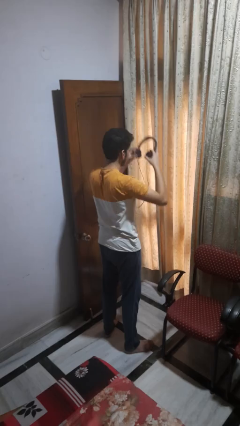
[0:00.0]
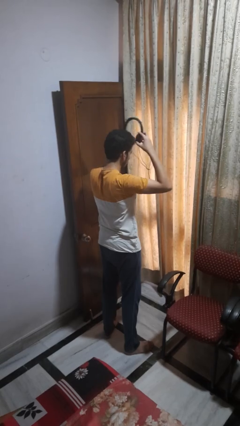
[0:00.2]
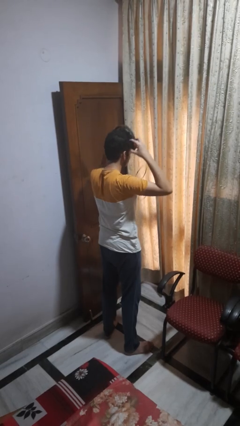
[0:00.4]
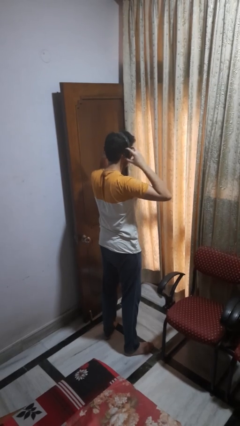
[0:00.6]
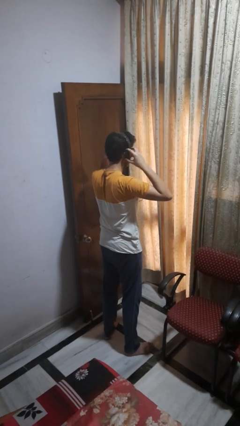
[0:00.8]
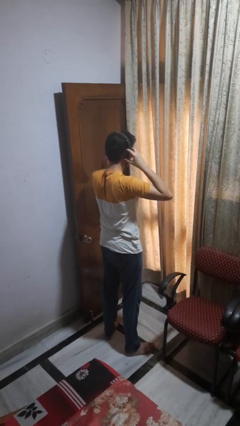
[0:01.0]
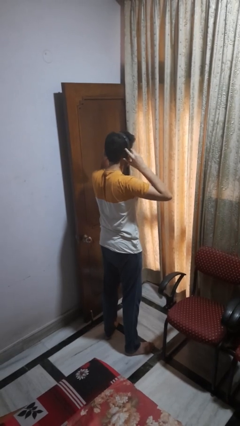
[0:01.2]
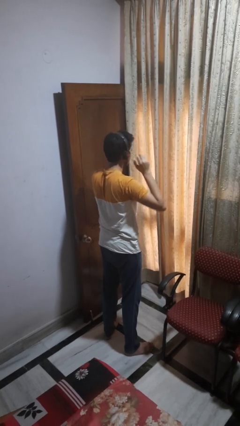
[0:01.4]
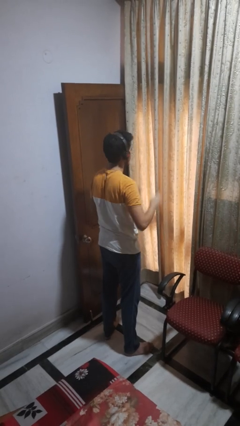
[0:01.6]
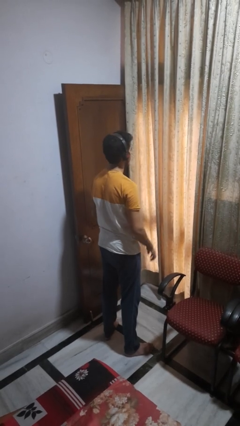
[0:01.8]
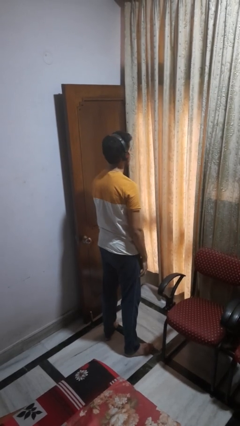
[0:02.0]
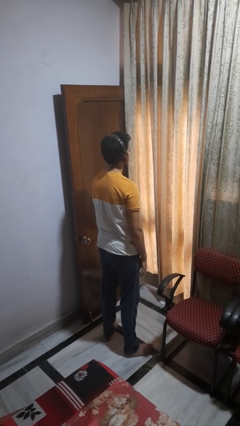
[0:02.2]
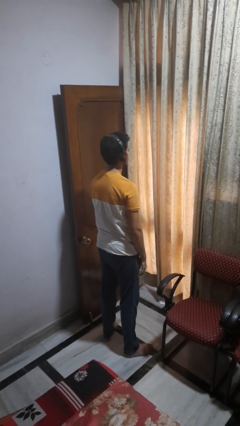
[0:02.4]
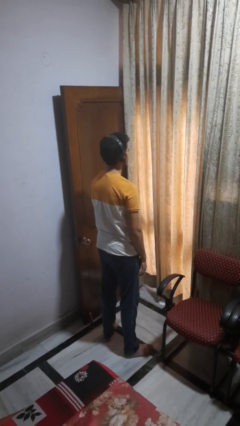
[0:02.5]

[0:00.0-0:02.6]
person puts on headphones

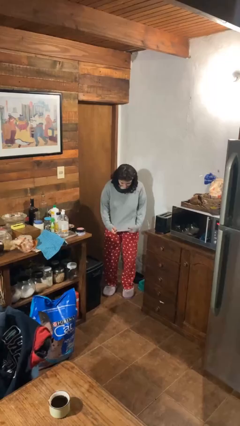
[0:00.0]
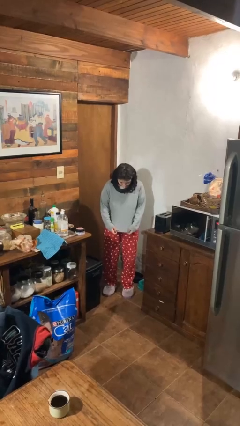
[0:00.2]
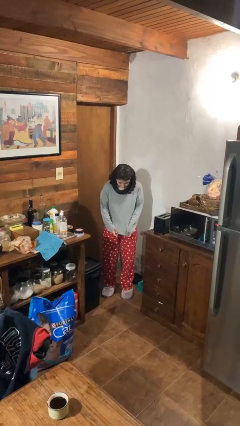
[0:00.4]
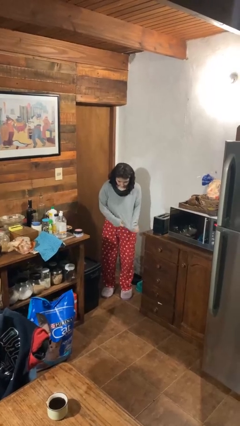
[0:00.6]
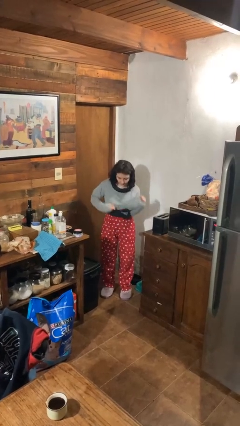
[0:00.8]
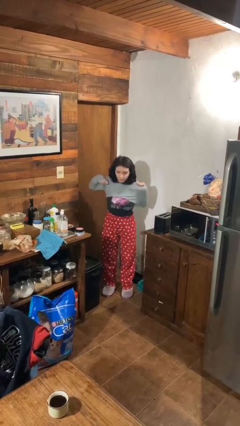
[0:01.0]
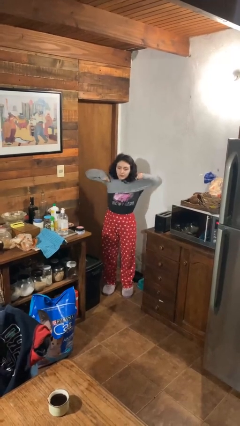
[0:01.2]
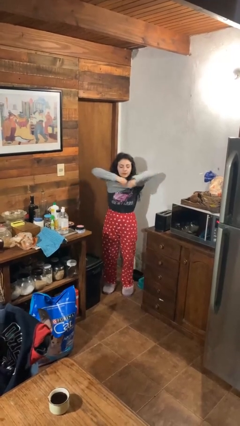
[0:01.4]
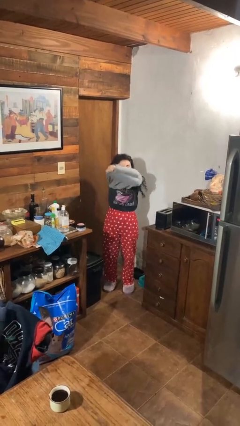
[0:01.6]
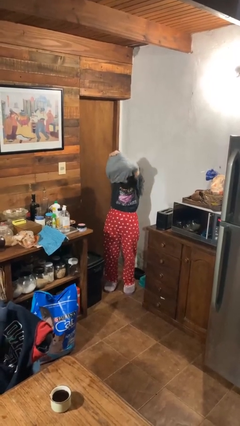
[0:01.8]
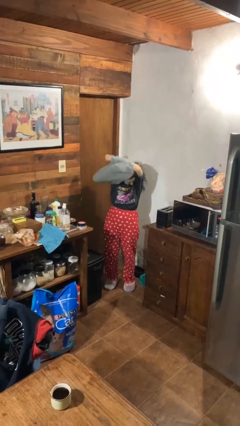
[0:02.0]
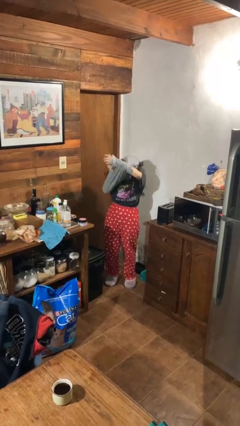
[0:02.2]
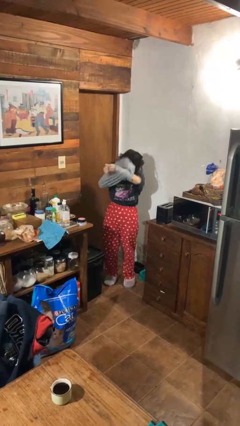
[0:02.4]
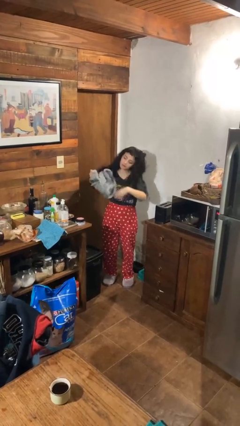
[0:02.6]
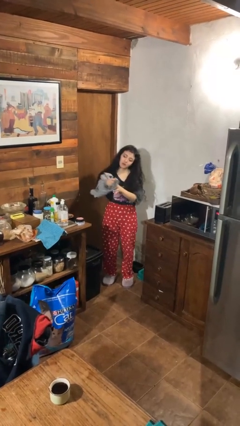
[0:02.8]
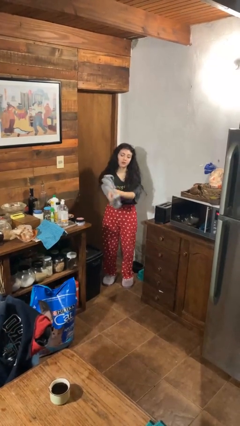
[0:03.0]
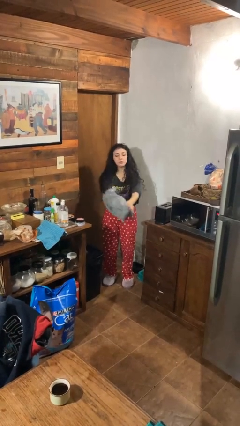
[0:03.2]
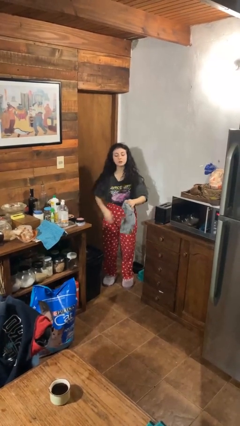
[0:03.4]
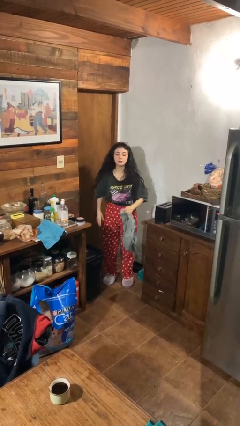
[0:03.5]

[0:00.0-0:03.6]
person takes off shirt

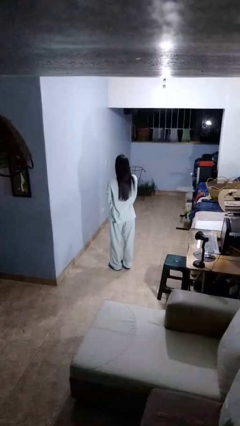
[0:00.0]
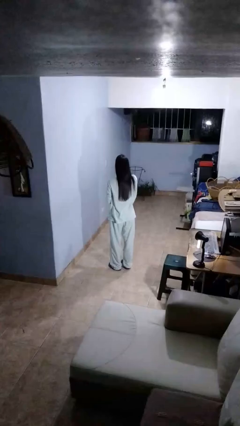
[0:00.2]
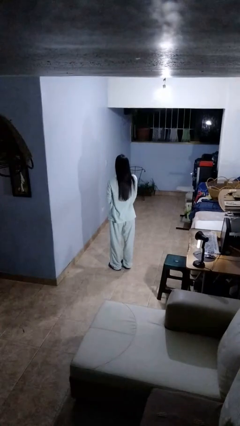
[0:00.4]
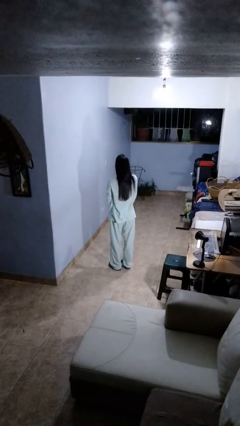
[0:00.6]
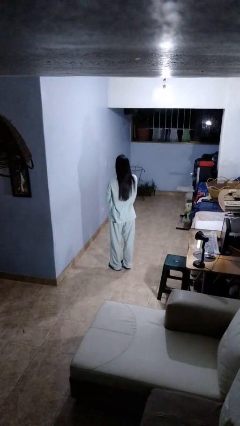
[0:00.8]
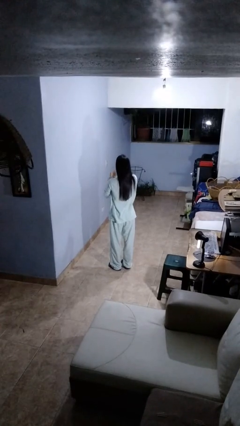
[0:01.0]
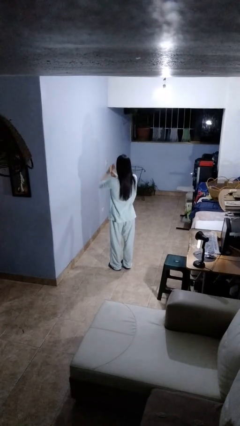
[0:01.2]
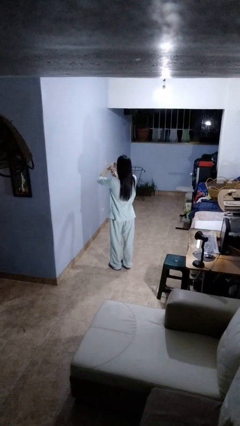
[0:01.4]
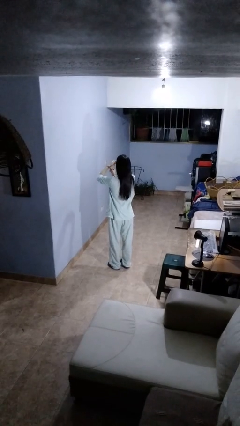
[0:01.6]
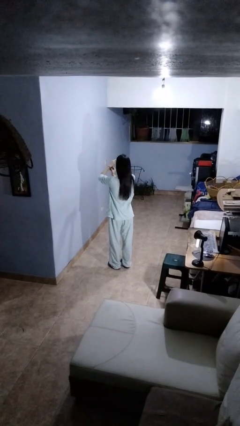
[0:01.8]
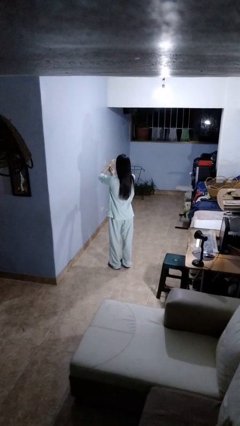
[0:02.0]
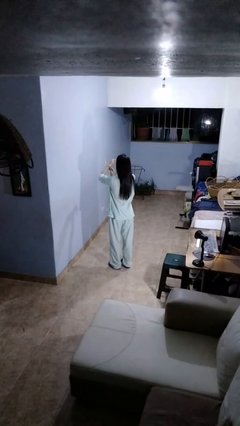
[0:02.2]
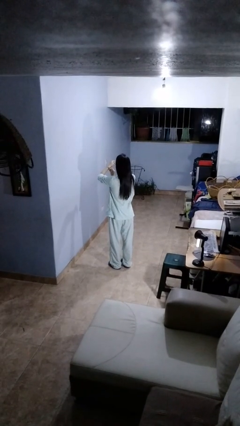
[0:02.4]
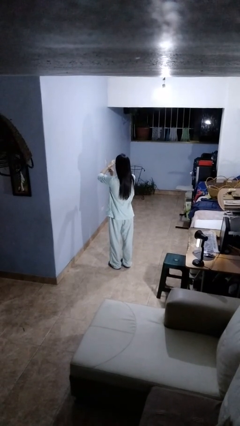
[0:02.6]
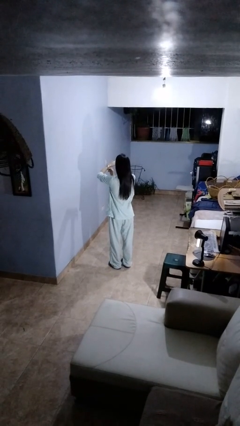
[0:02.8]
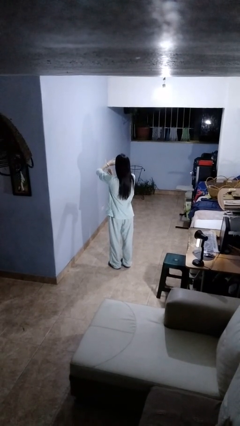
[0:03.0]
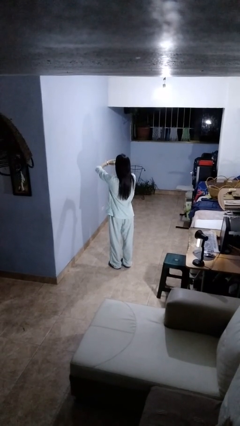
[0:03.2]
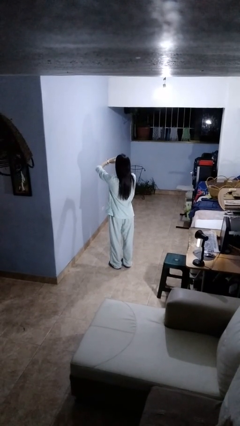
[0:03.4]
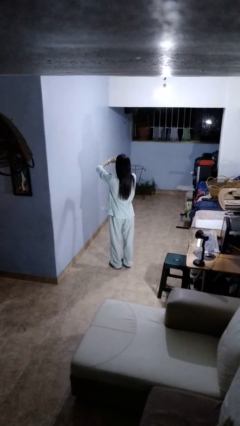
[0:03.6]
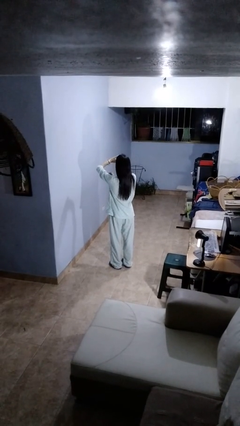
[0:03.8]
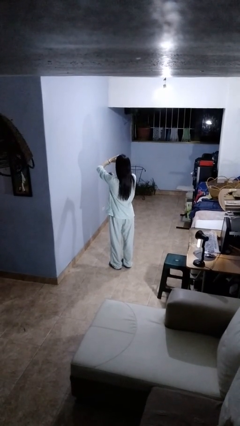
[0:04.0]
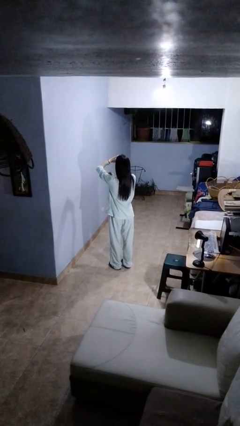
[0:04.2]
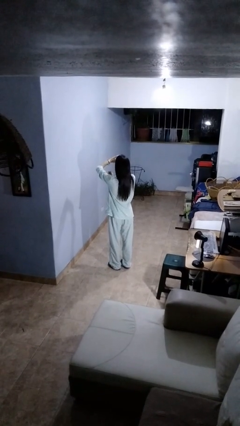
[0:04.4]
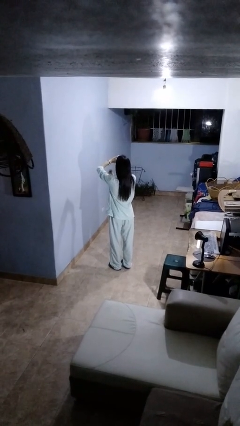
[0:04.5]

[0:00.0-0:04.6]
person puts on wristwatch

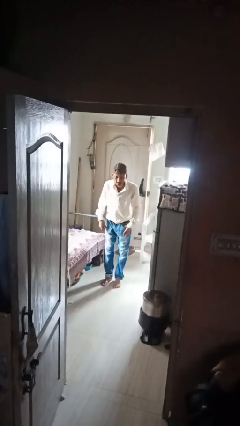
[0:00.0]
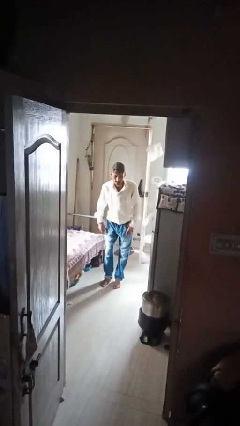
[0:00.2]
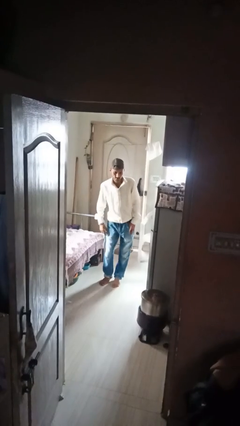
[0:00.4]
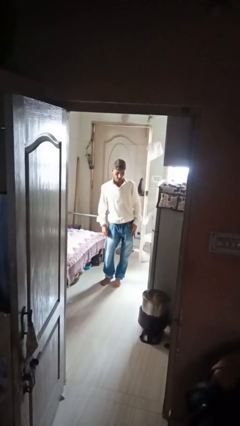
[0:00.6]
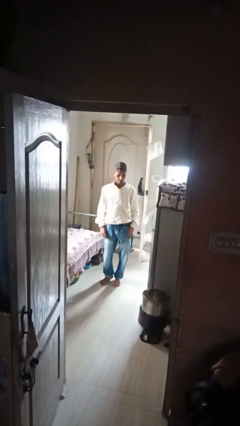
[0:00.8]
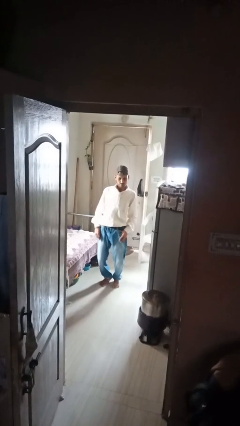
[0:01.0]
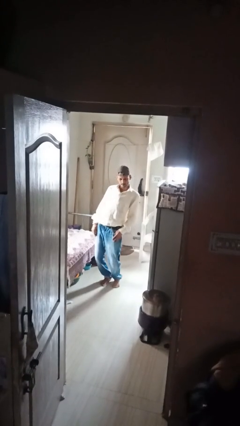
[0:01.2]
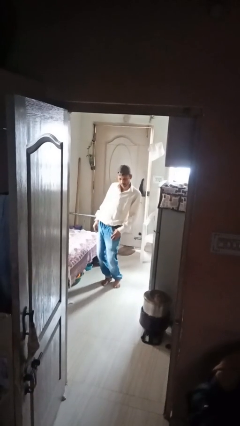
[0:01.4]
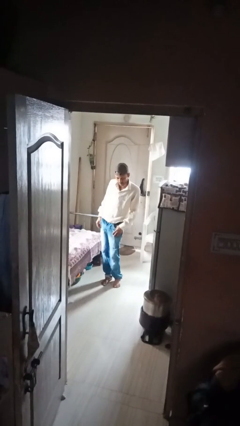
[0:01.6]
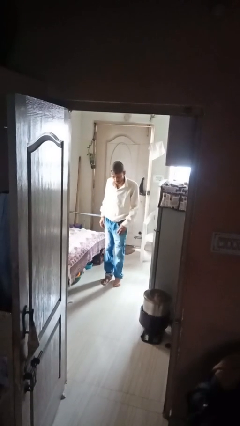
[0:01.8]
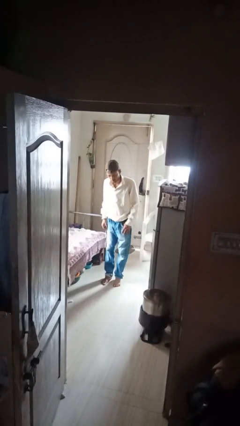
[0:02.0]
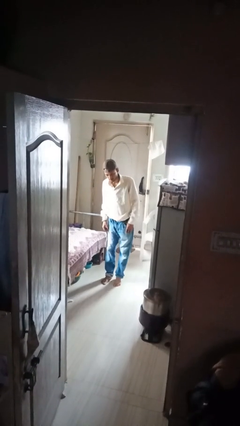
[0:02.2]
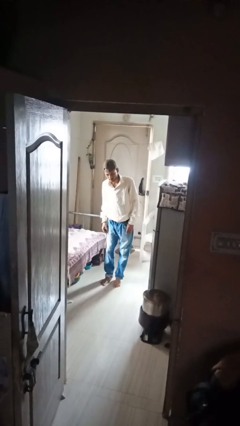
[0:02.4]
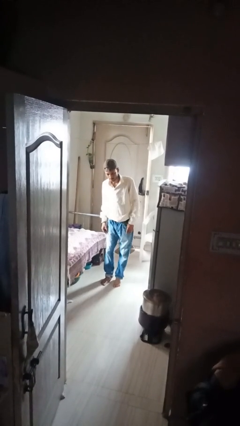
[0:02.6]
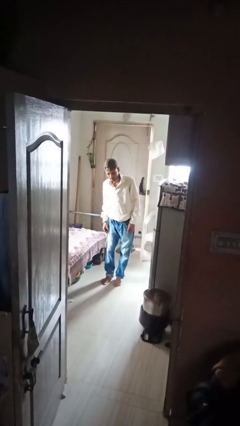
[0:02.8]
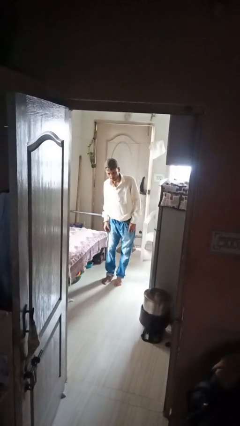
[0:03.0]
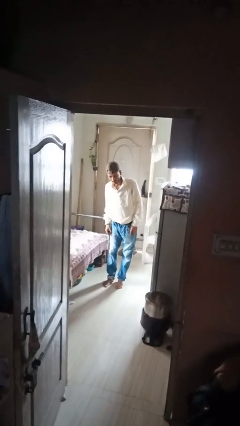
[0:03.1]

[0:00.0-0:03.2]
person wiggles hips

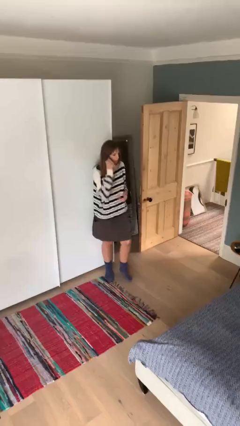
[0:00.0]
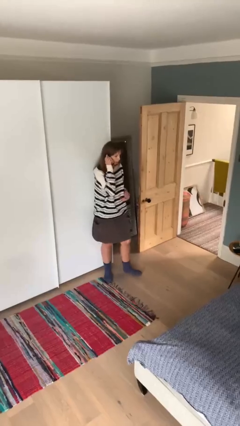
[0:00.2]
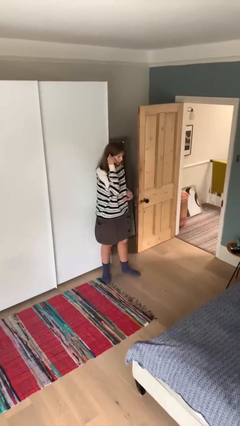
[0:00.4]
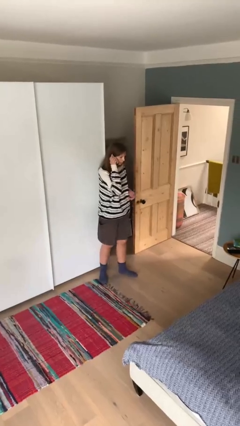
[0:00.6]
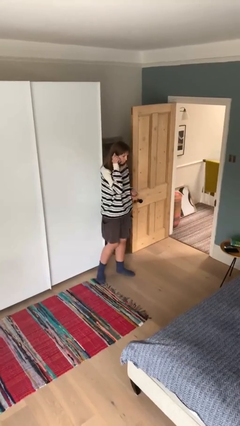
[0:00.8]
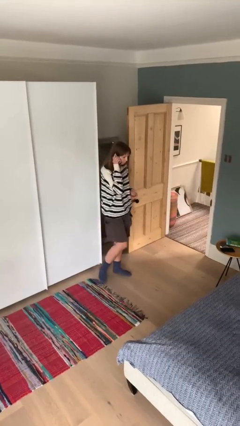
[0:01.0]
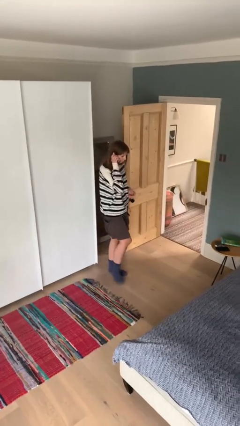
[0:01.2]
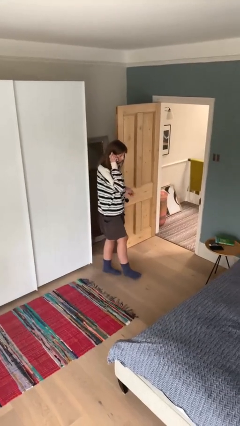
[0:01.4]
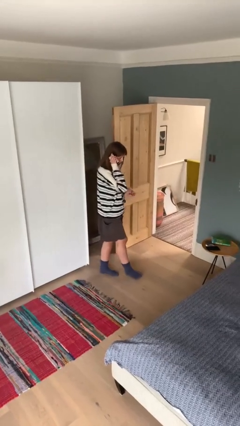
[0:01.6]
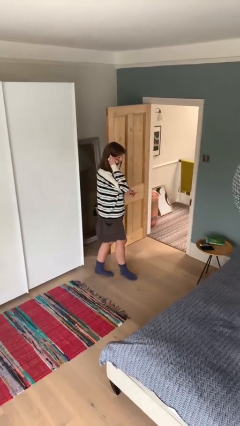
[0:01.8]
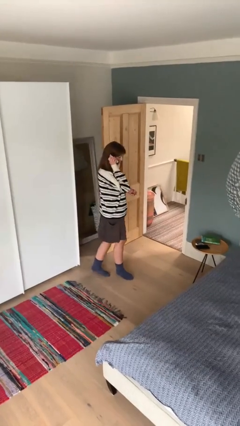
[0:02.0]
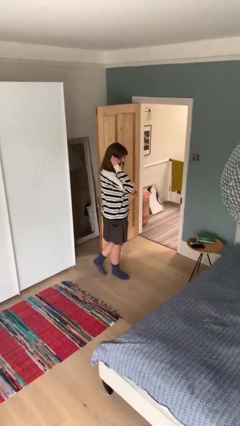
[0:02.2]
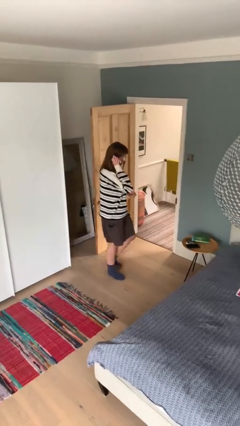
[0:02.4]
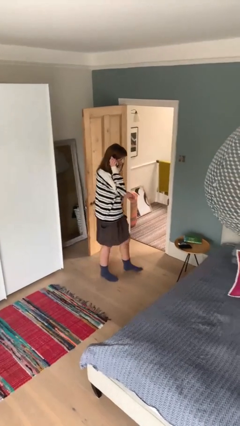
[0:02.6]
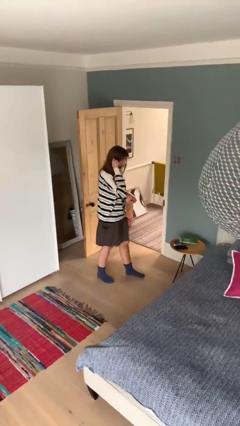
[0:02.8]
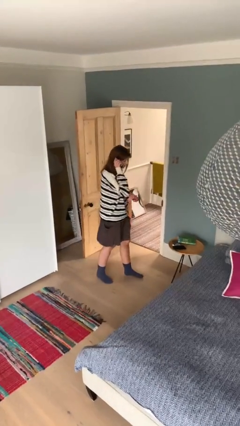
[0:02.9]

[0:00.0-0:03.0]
person talks on phone

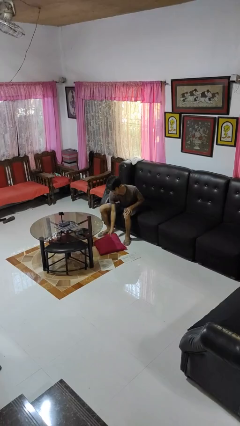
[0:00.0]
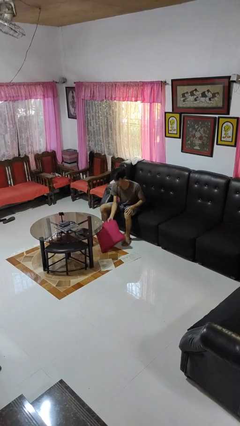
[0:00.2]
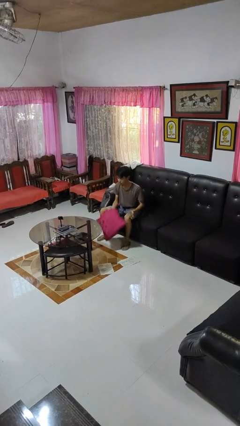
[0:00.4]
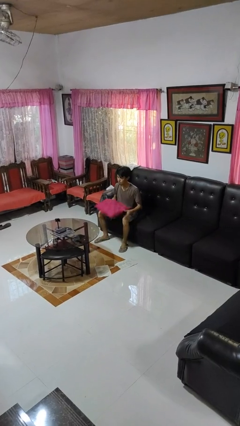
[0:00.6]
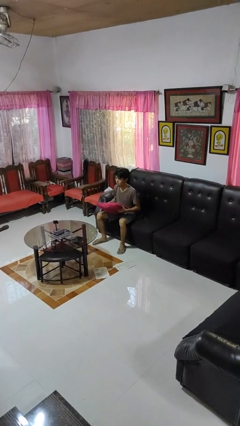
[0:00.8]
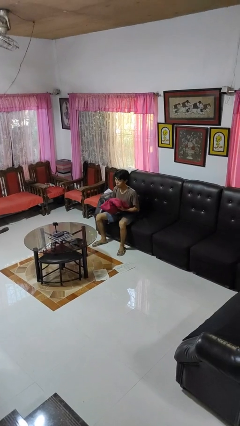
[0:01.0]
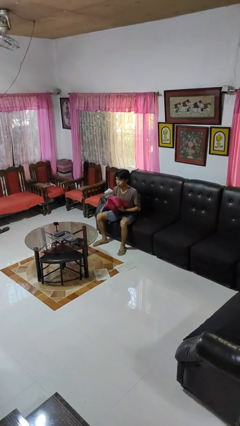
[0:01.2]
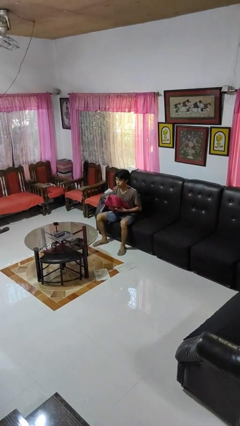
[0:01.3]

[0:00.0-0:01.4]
person picks up object from floor
